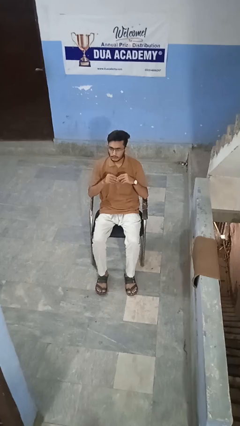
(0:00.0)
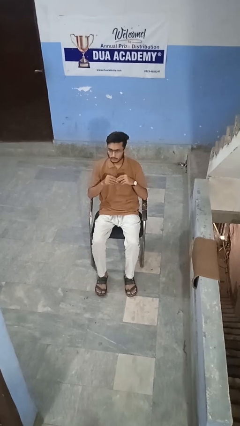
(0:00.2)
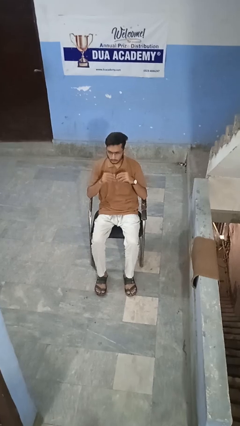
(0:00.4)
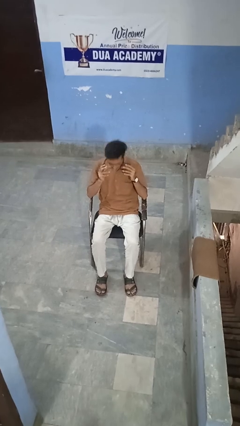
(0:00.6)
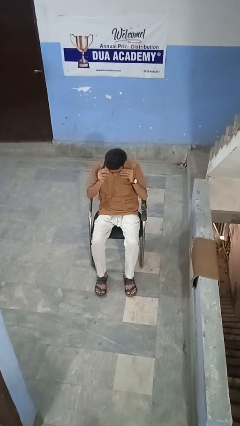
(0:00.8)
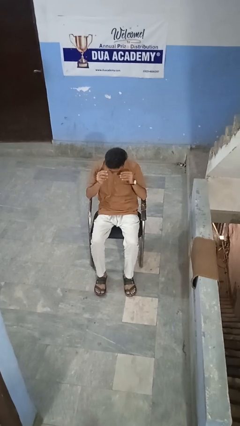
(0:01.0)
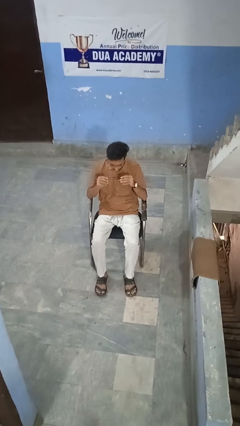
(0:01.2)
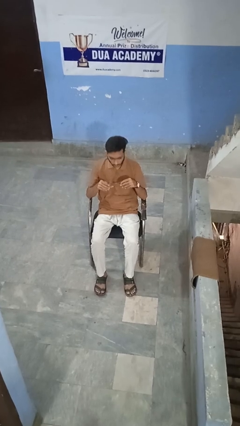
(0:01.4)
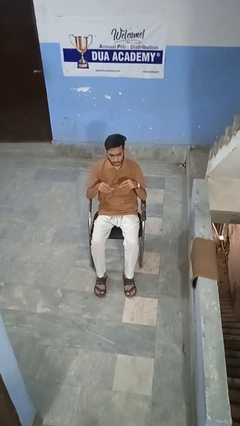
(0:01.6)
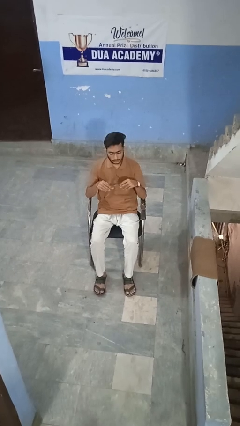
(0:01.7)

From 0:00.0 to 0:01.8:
person takes off glasses

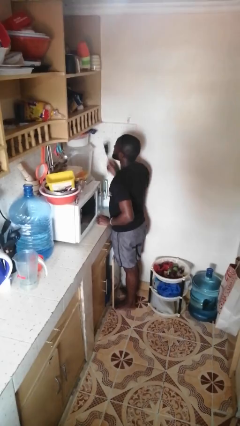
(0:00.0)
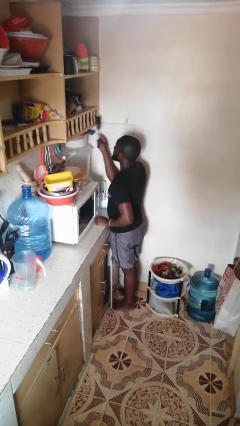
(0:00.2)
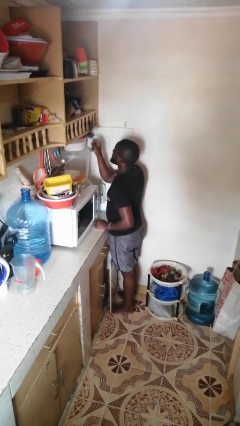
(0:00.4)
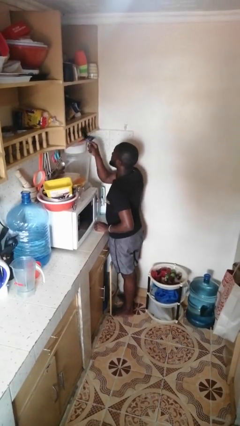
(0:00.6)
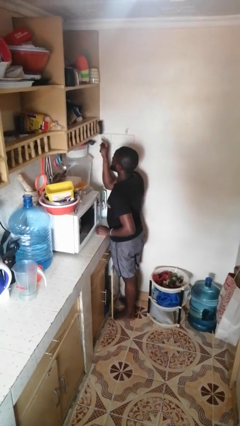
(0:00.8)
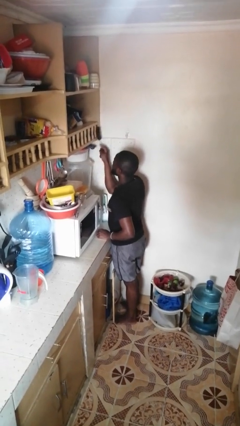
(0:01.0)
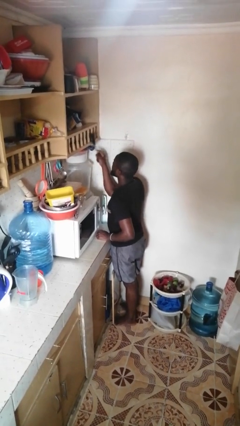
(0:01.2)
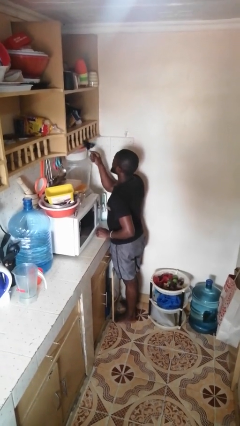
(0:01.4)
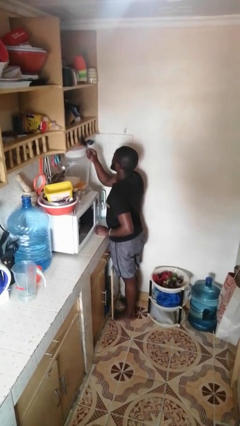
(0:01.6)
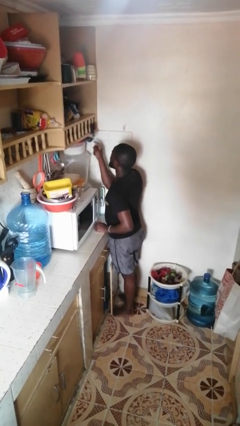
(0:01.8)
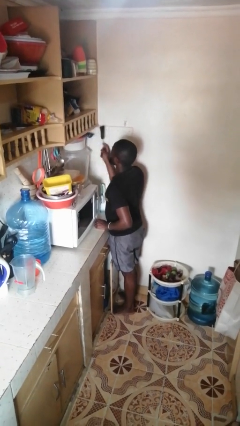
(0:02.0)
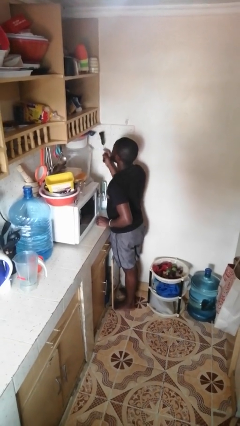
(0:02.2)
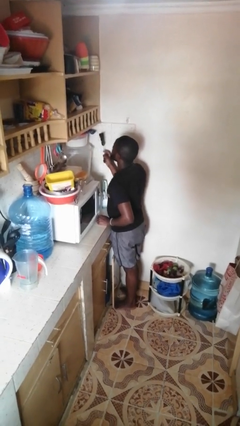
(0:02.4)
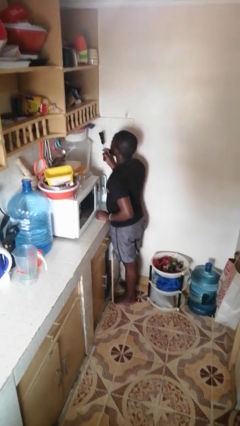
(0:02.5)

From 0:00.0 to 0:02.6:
person dusts furniture

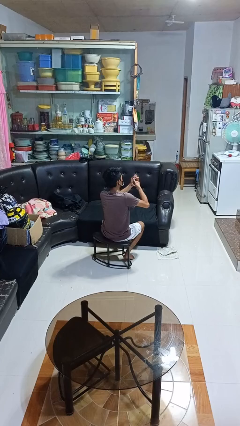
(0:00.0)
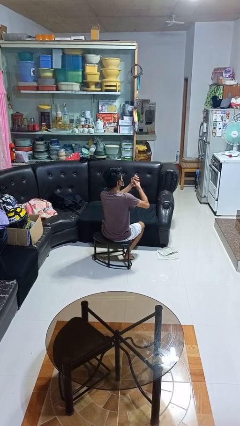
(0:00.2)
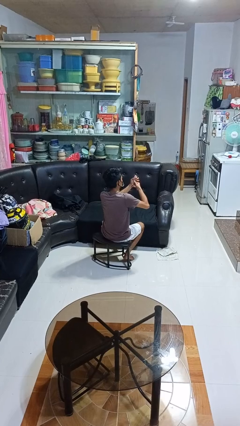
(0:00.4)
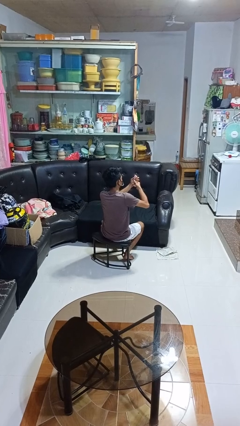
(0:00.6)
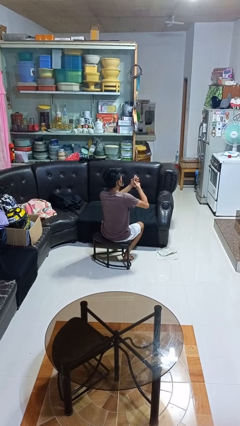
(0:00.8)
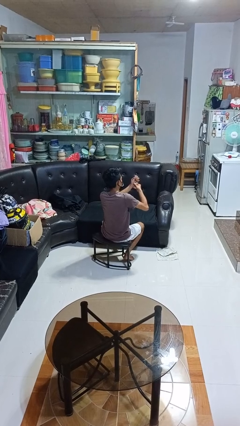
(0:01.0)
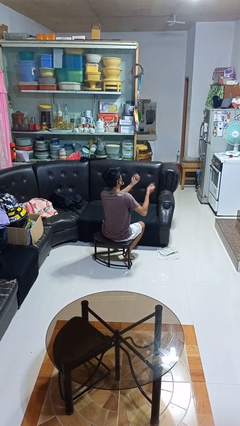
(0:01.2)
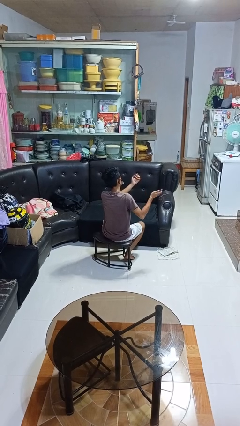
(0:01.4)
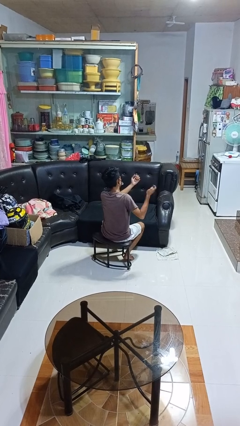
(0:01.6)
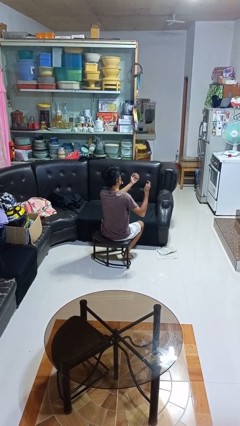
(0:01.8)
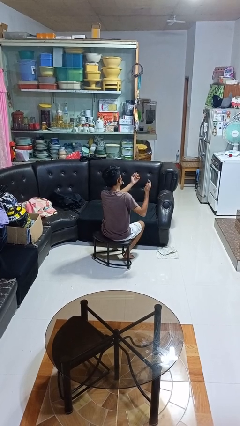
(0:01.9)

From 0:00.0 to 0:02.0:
person clips fingernails

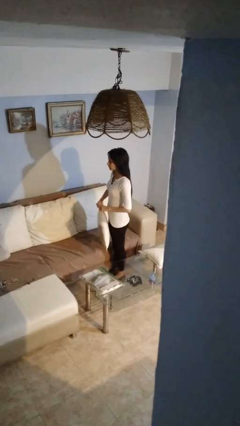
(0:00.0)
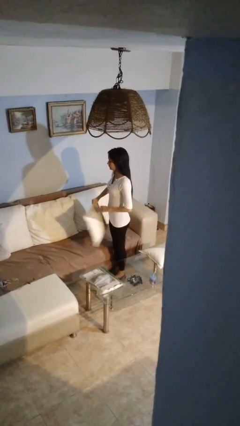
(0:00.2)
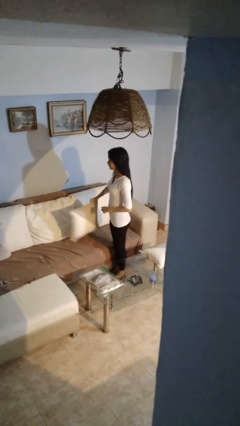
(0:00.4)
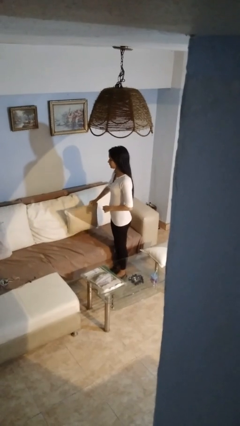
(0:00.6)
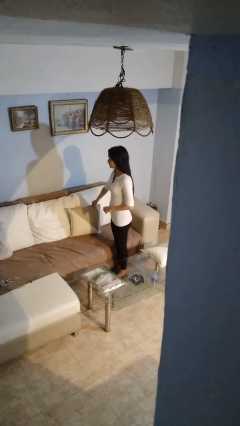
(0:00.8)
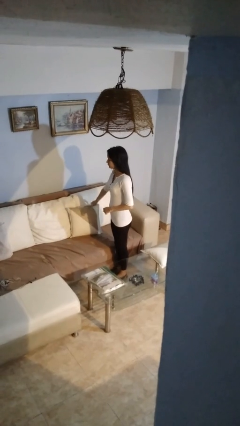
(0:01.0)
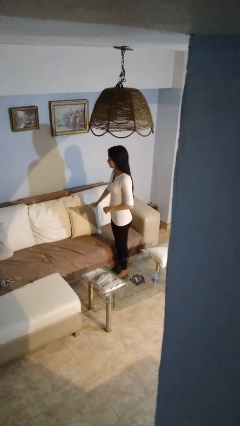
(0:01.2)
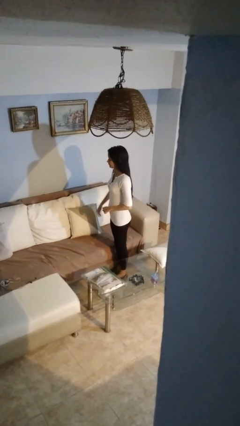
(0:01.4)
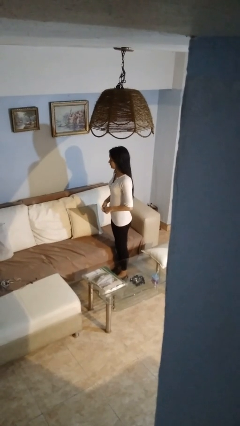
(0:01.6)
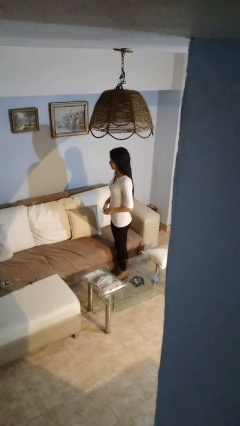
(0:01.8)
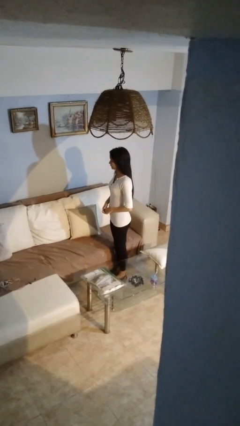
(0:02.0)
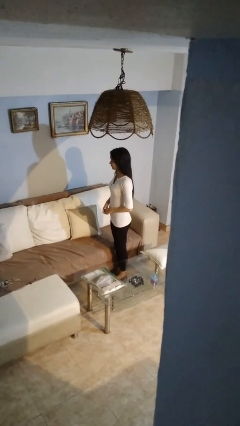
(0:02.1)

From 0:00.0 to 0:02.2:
person picks up object from couch

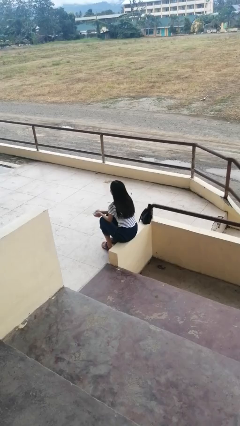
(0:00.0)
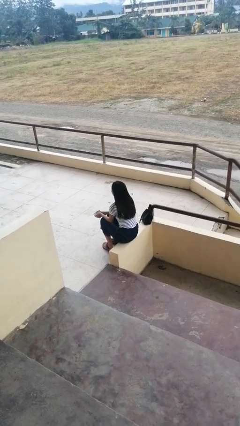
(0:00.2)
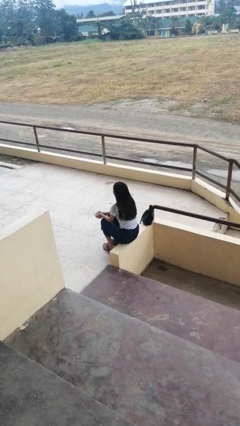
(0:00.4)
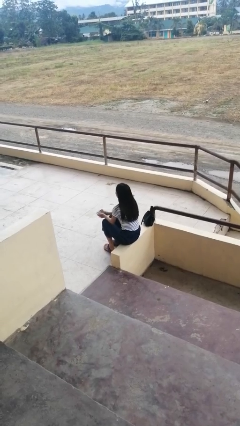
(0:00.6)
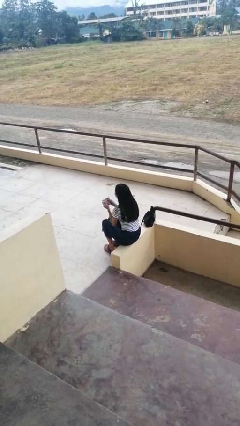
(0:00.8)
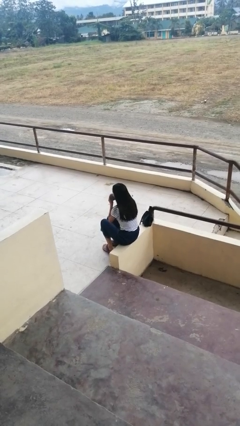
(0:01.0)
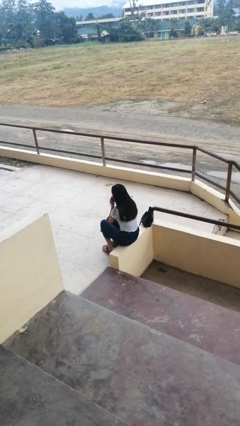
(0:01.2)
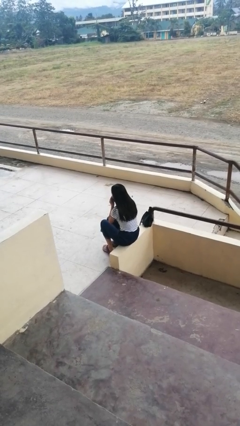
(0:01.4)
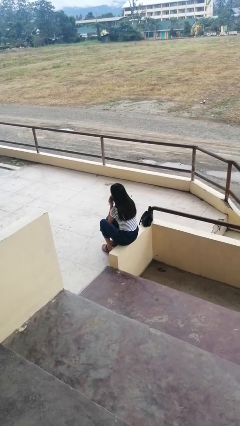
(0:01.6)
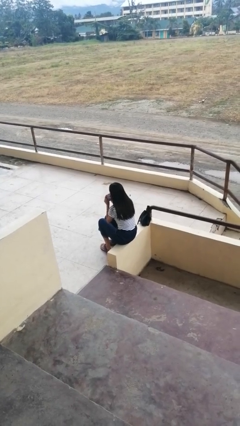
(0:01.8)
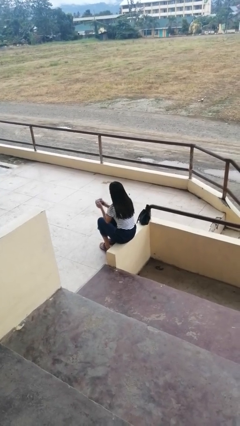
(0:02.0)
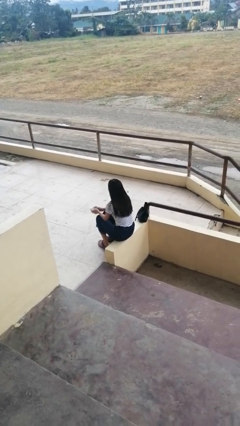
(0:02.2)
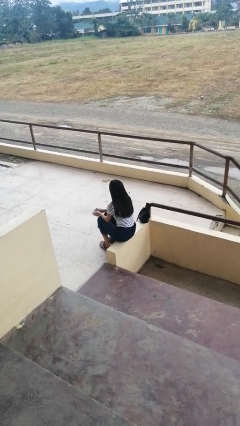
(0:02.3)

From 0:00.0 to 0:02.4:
person blows nose

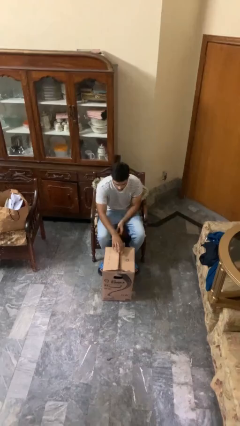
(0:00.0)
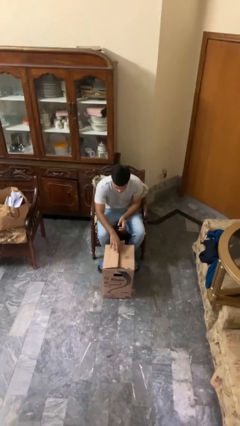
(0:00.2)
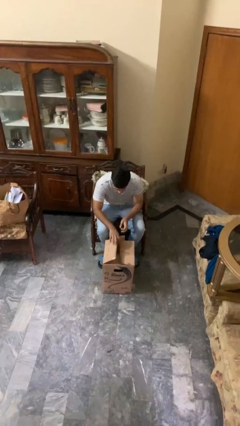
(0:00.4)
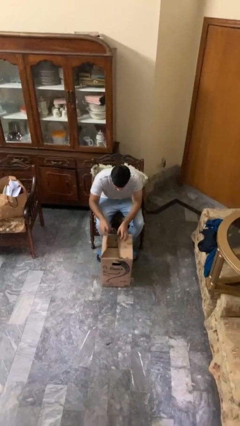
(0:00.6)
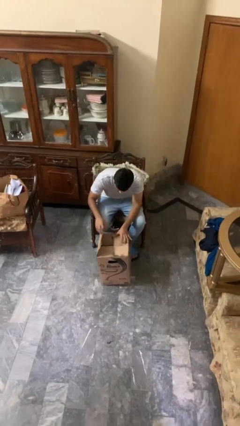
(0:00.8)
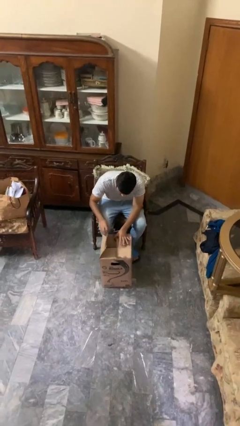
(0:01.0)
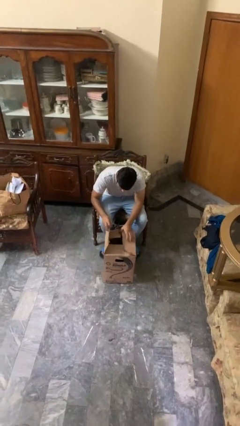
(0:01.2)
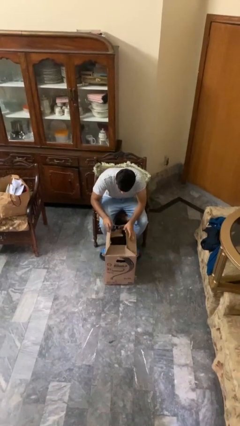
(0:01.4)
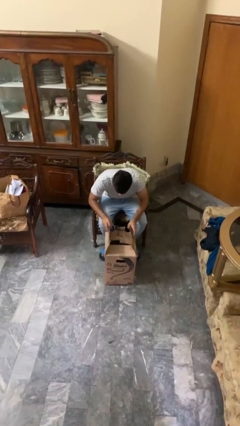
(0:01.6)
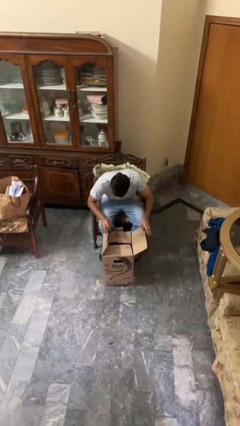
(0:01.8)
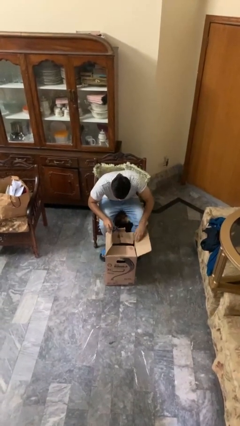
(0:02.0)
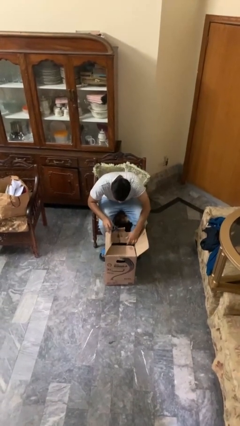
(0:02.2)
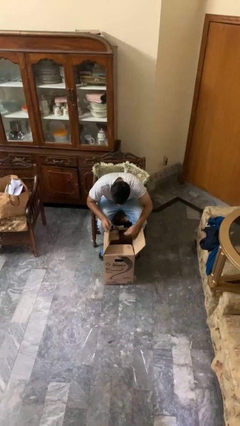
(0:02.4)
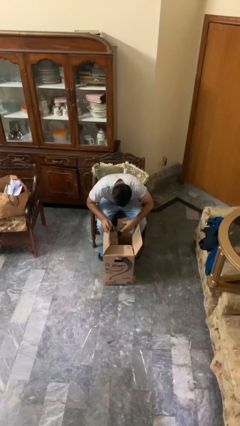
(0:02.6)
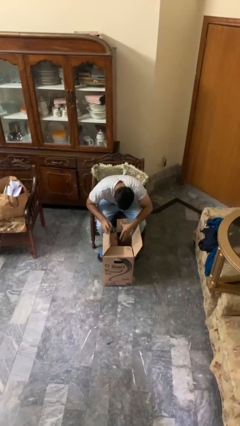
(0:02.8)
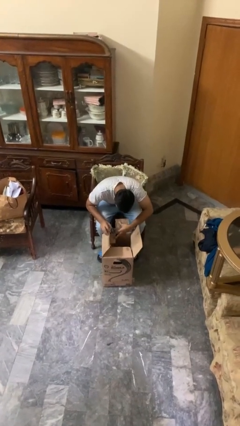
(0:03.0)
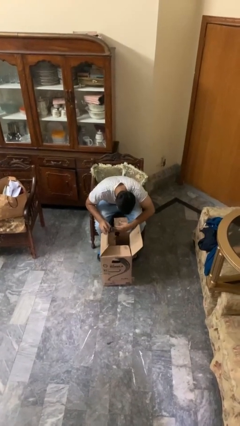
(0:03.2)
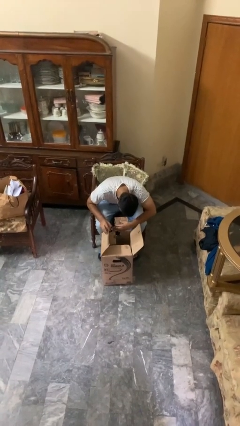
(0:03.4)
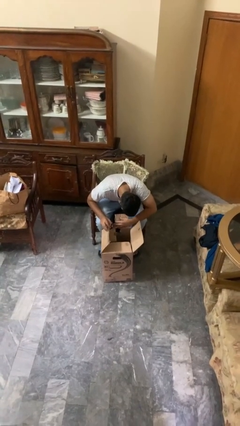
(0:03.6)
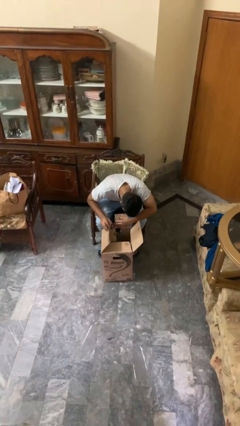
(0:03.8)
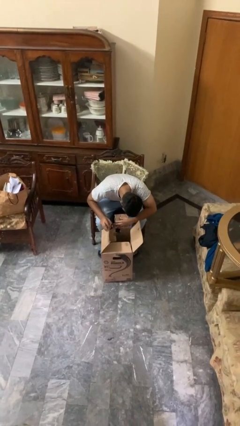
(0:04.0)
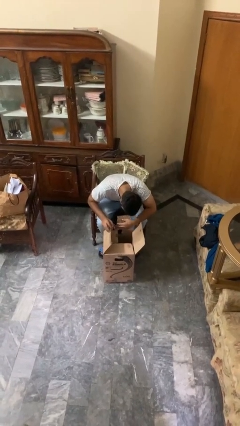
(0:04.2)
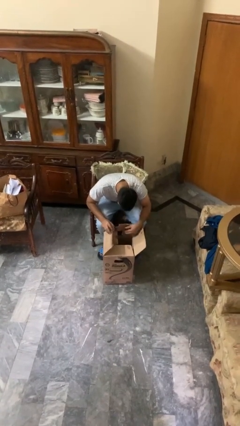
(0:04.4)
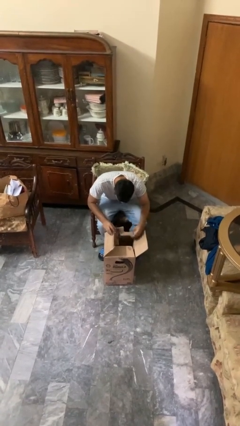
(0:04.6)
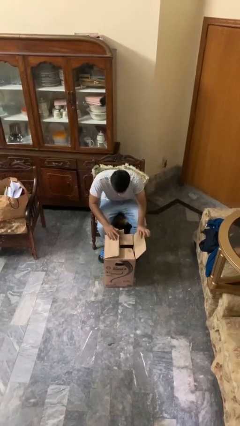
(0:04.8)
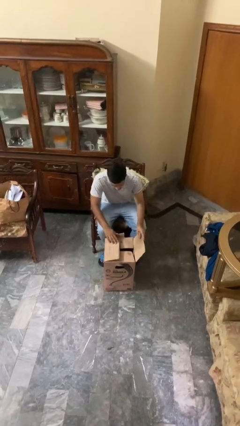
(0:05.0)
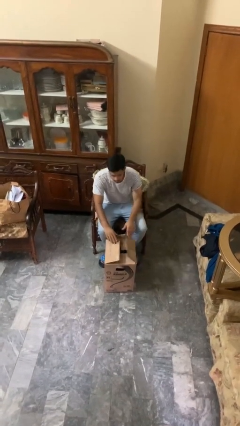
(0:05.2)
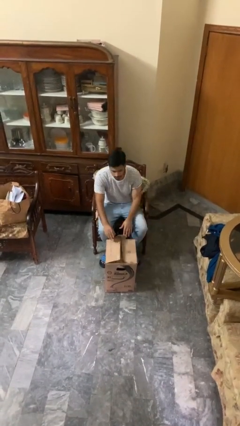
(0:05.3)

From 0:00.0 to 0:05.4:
person searches in box

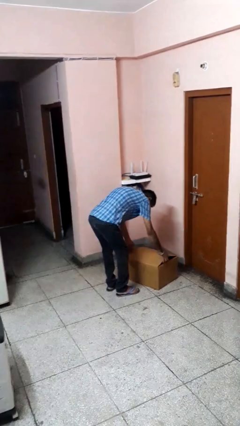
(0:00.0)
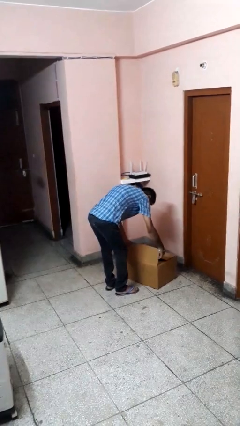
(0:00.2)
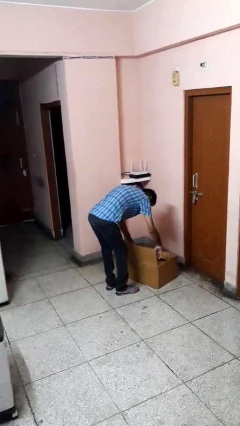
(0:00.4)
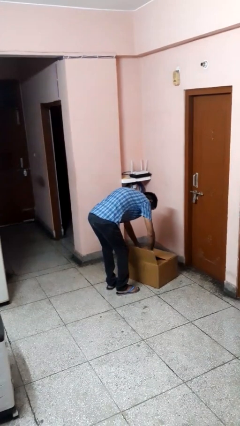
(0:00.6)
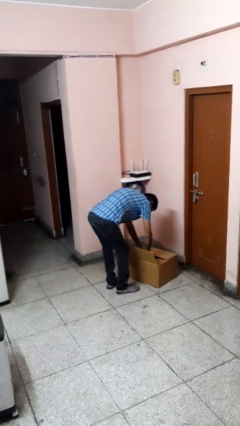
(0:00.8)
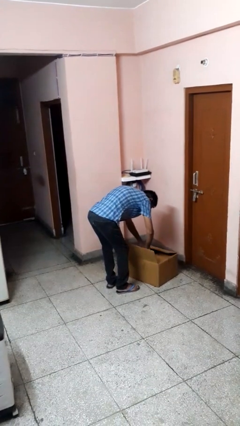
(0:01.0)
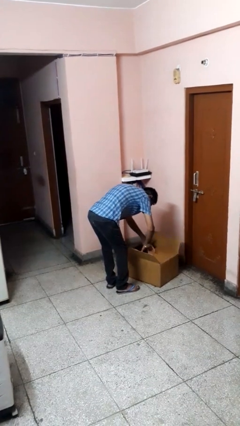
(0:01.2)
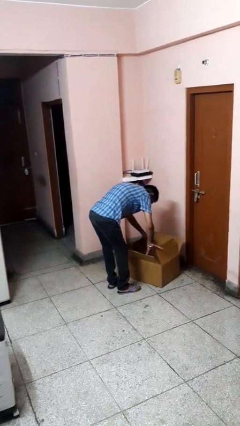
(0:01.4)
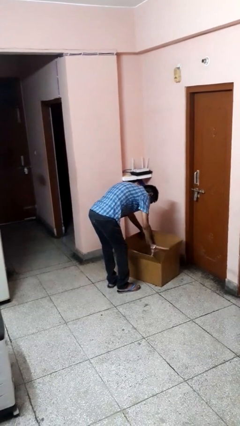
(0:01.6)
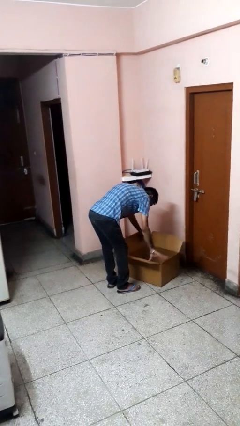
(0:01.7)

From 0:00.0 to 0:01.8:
person opens box